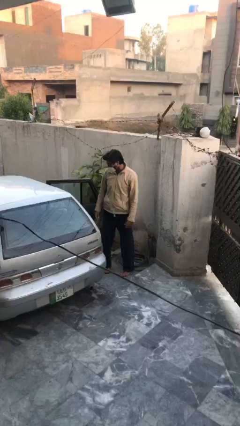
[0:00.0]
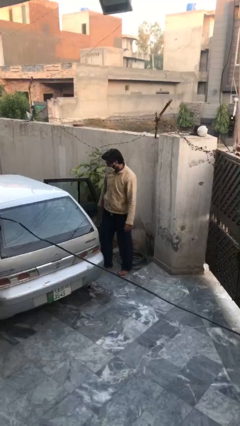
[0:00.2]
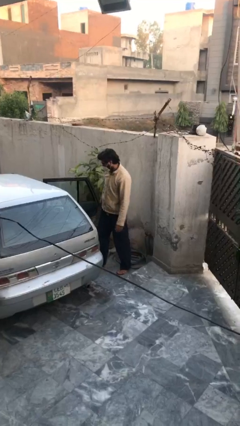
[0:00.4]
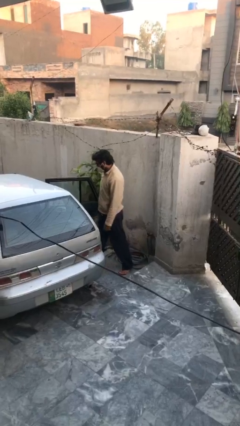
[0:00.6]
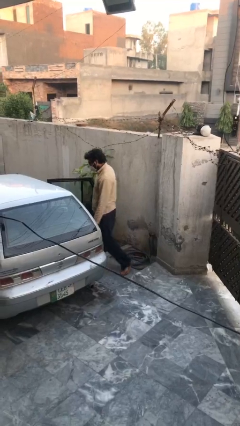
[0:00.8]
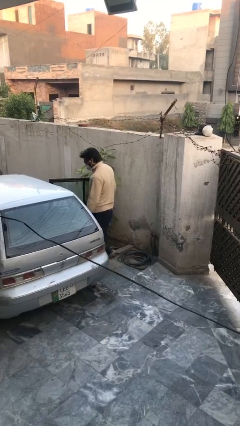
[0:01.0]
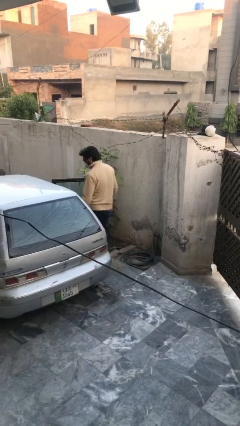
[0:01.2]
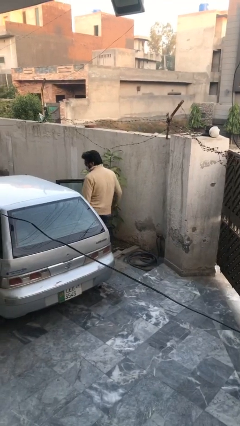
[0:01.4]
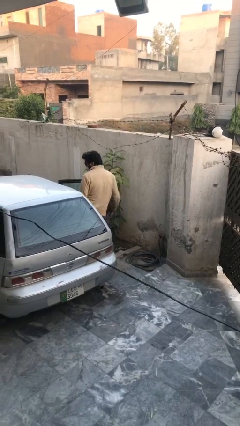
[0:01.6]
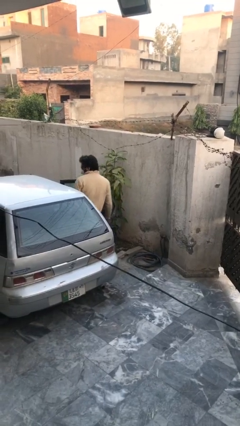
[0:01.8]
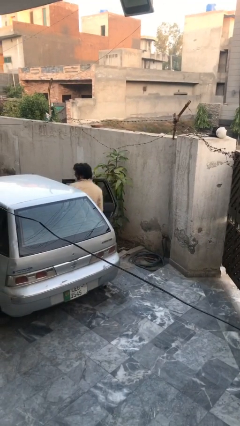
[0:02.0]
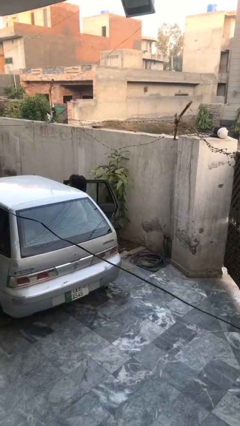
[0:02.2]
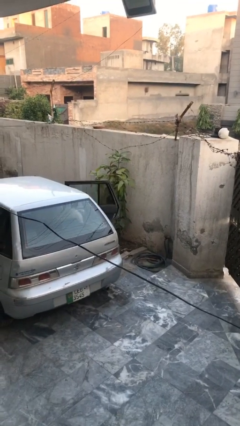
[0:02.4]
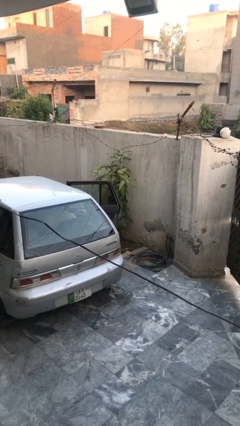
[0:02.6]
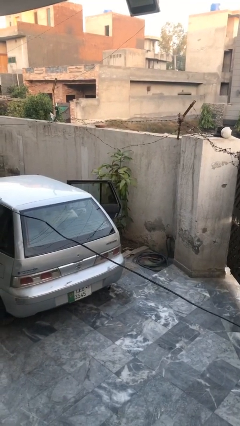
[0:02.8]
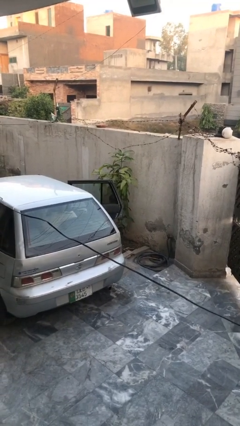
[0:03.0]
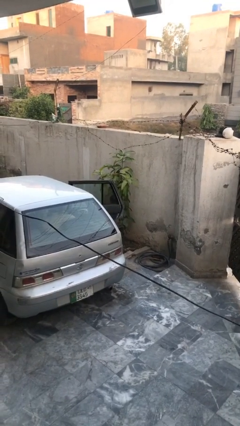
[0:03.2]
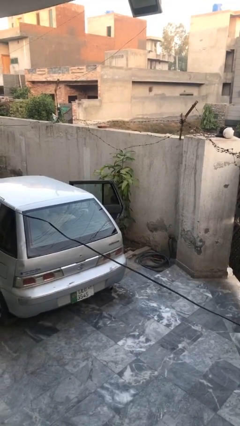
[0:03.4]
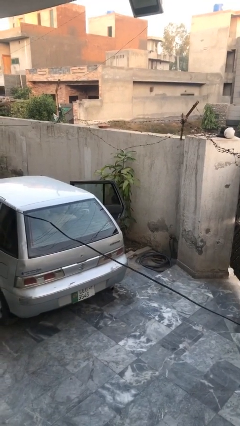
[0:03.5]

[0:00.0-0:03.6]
person enters car

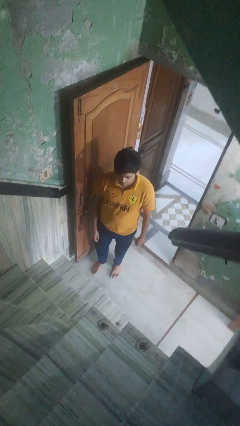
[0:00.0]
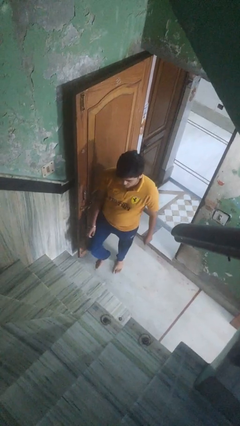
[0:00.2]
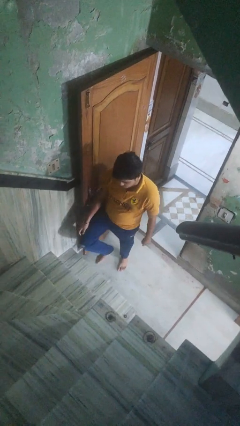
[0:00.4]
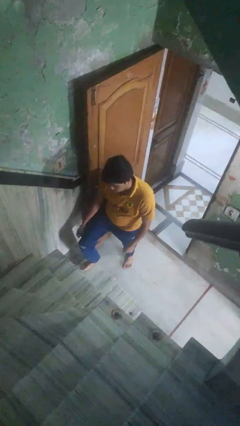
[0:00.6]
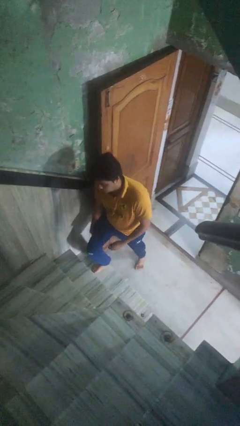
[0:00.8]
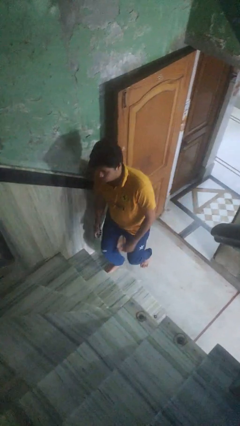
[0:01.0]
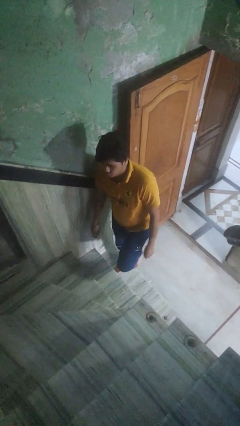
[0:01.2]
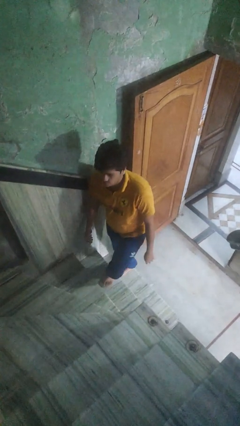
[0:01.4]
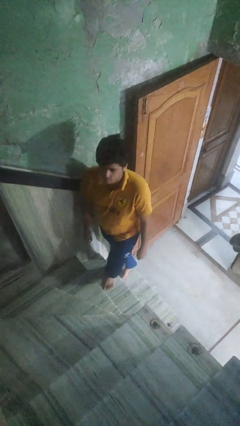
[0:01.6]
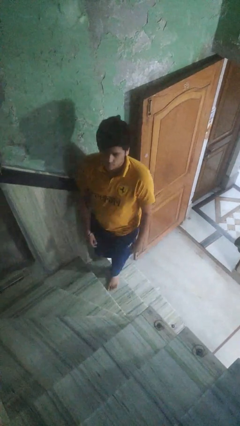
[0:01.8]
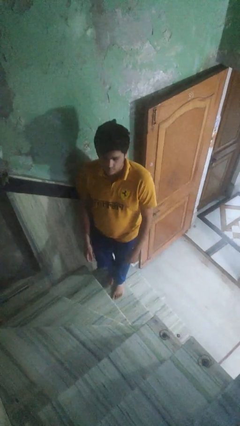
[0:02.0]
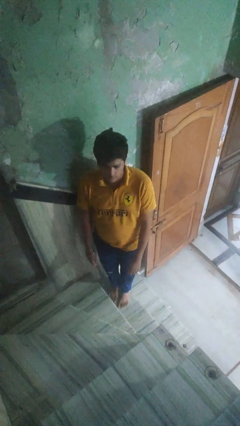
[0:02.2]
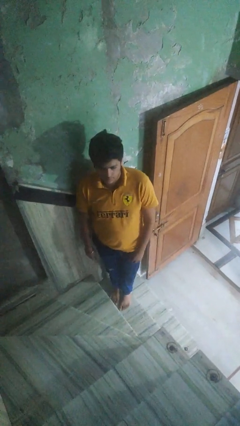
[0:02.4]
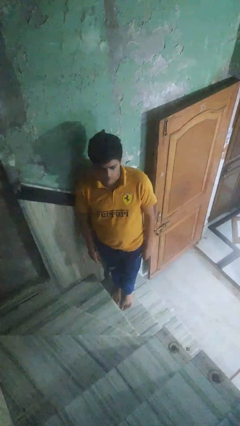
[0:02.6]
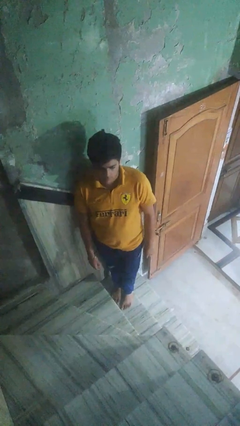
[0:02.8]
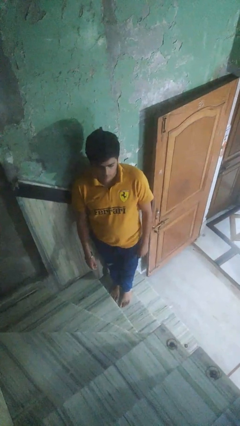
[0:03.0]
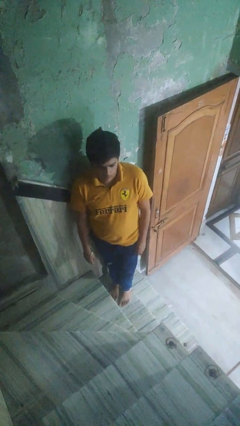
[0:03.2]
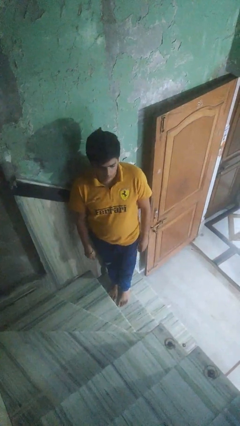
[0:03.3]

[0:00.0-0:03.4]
person climbs up stairs

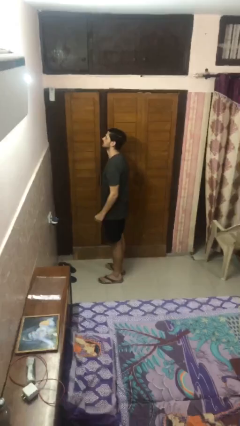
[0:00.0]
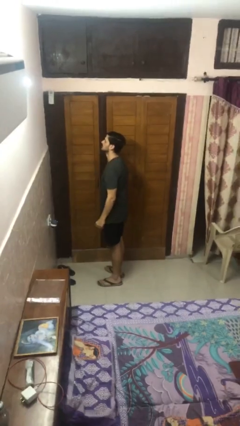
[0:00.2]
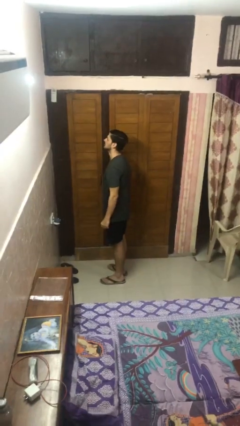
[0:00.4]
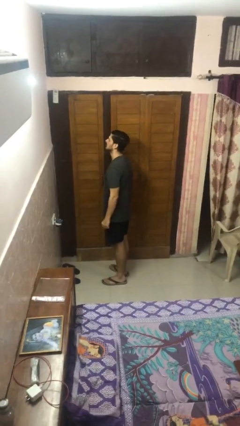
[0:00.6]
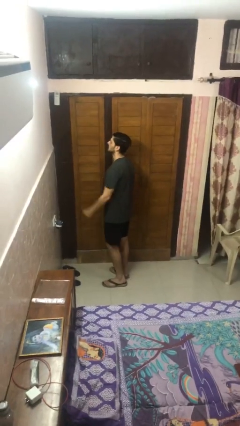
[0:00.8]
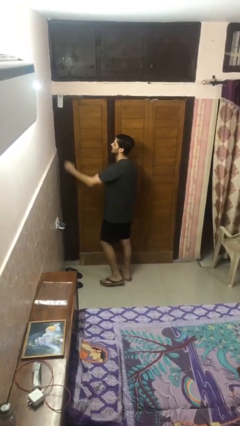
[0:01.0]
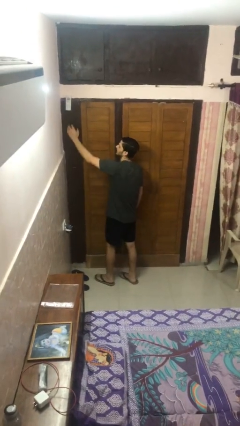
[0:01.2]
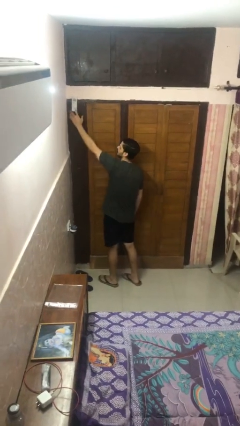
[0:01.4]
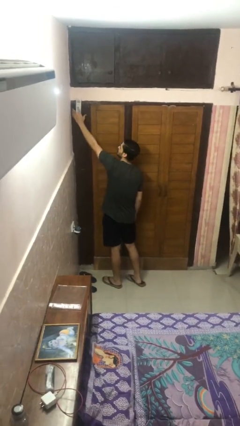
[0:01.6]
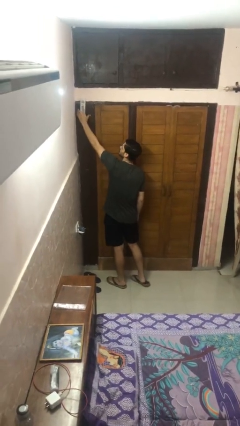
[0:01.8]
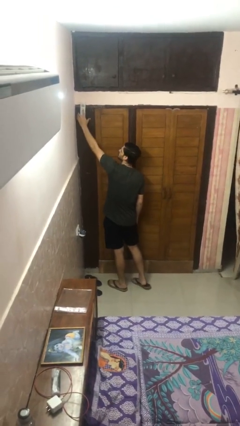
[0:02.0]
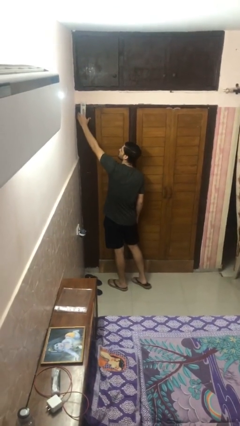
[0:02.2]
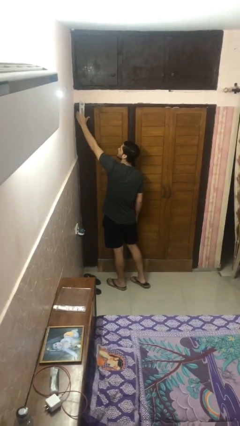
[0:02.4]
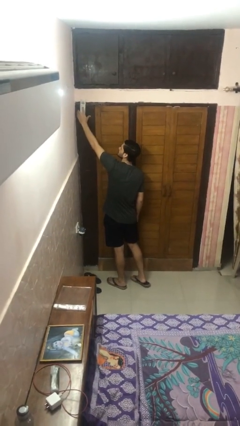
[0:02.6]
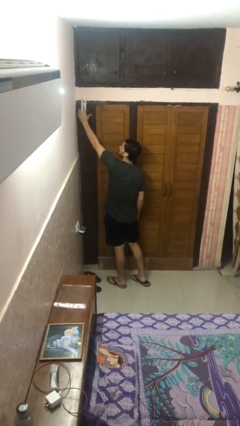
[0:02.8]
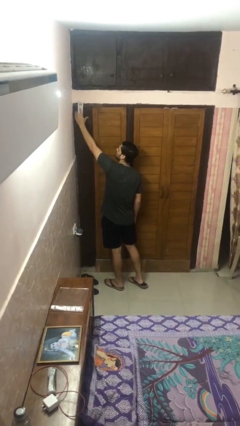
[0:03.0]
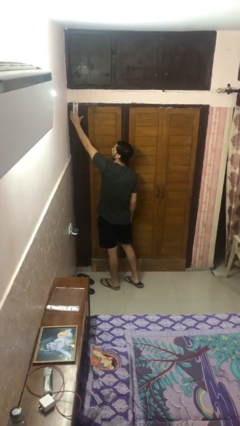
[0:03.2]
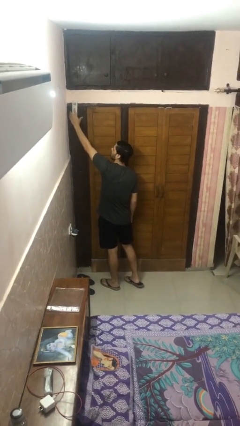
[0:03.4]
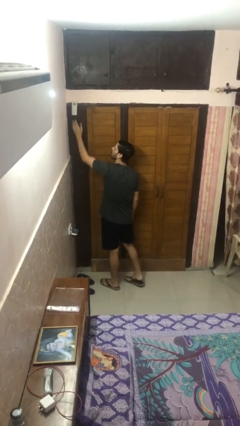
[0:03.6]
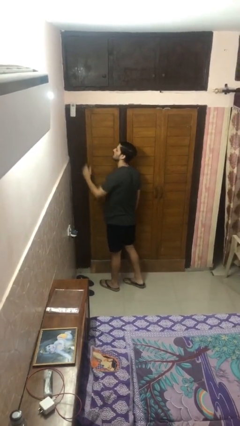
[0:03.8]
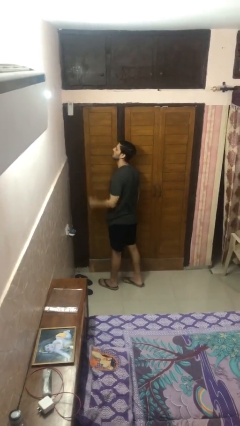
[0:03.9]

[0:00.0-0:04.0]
person adjusts thermostat

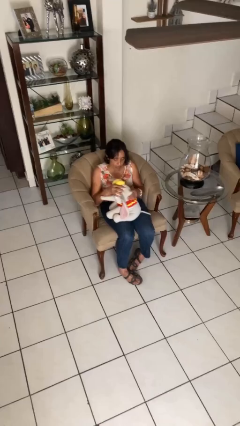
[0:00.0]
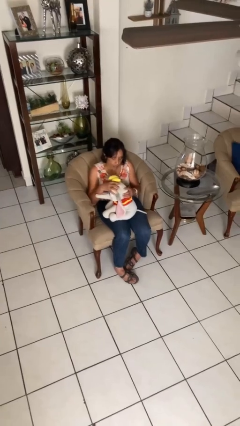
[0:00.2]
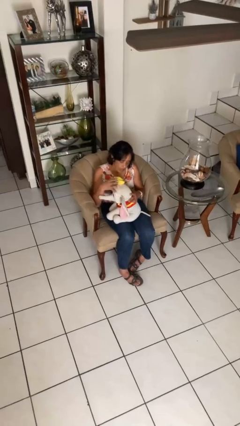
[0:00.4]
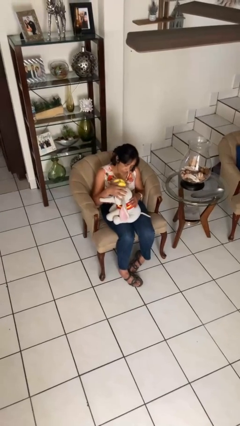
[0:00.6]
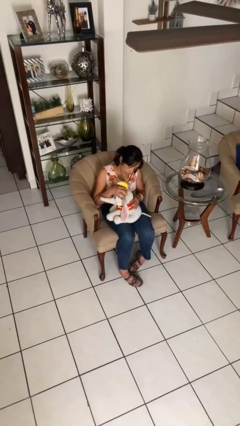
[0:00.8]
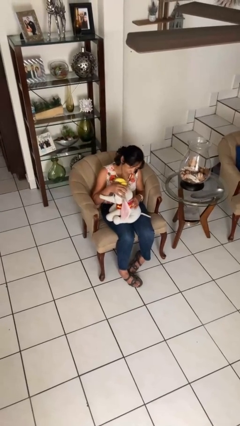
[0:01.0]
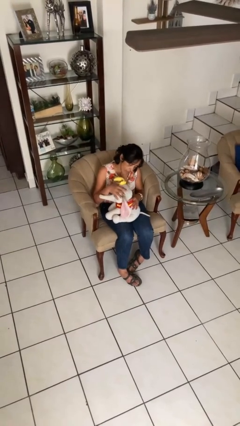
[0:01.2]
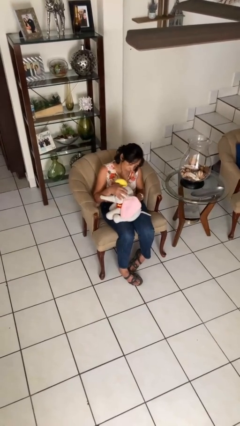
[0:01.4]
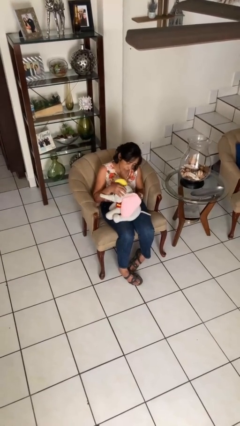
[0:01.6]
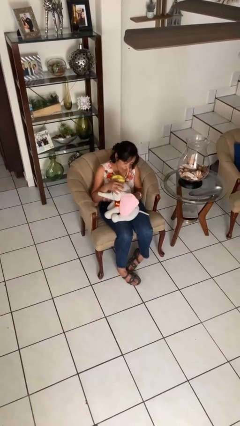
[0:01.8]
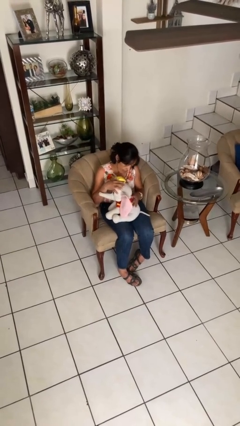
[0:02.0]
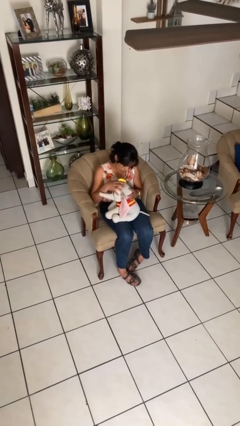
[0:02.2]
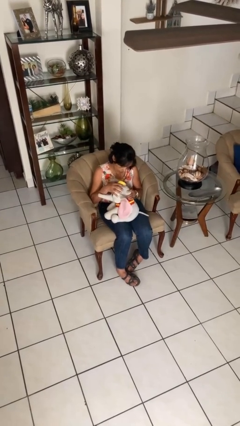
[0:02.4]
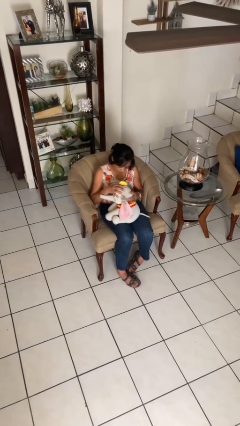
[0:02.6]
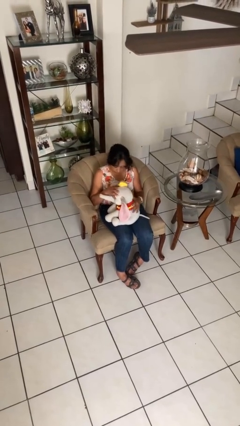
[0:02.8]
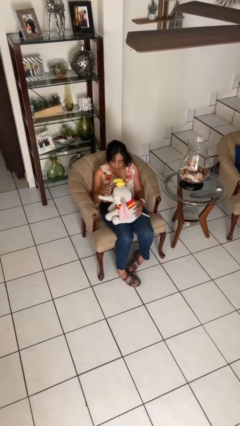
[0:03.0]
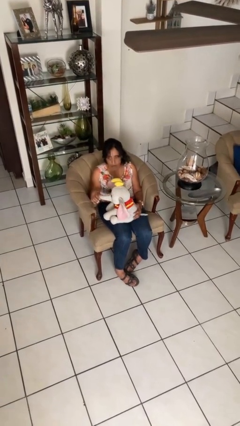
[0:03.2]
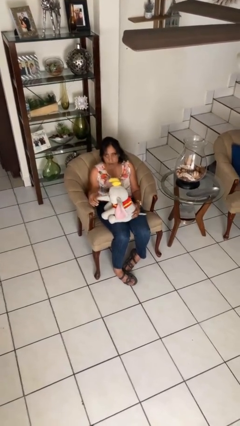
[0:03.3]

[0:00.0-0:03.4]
person squeezes object

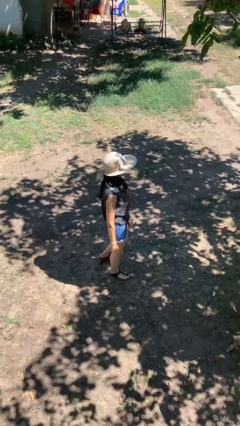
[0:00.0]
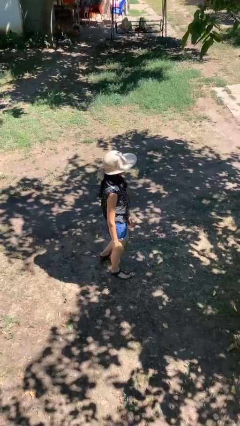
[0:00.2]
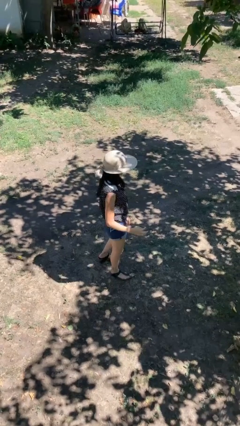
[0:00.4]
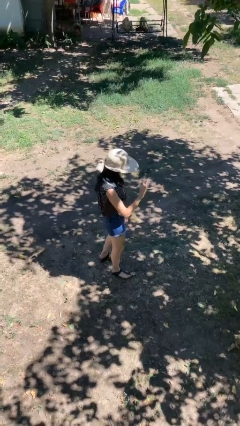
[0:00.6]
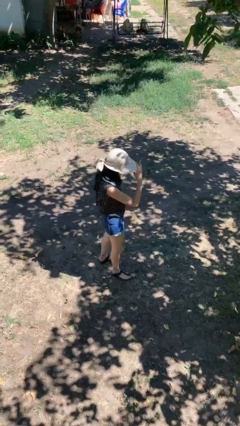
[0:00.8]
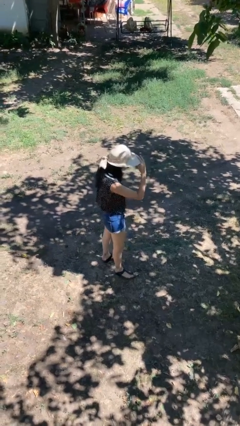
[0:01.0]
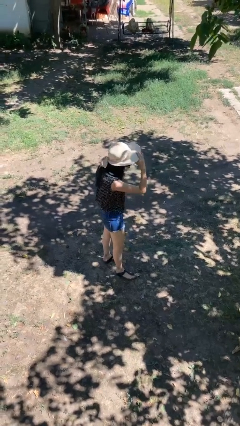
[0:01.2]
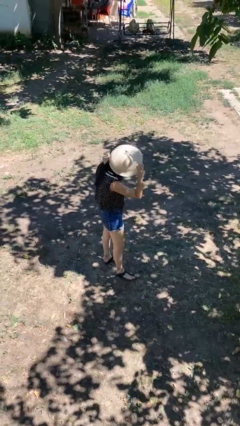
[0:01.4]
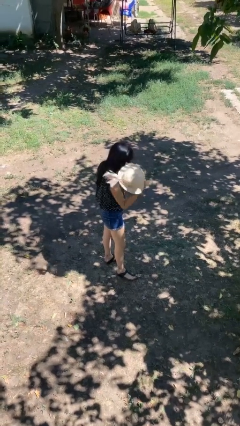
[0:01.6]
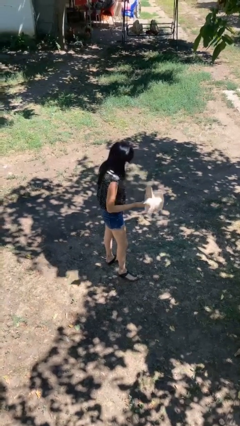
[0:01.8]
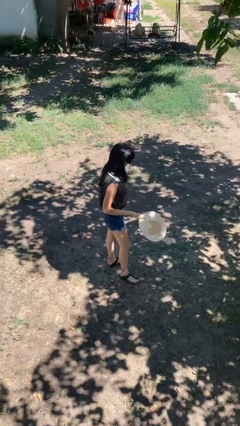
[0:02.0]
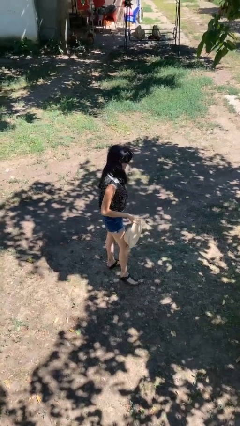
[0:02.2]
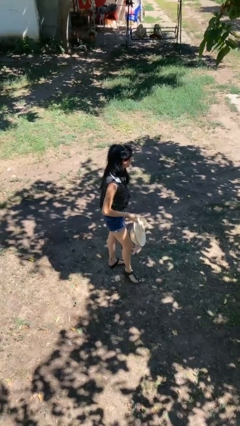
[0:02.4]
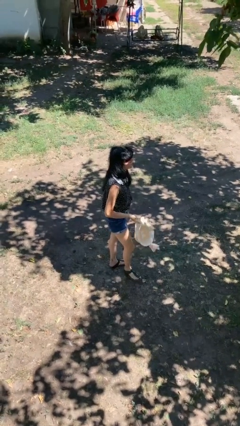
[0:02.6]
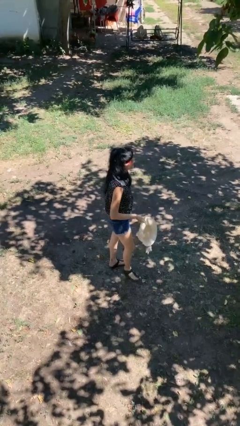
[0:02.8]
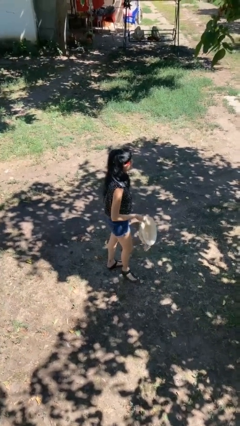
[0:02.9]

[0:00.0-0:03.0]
person takes off hat
